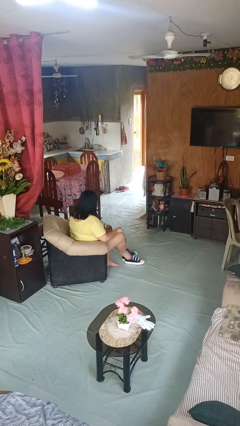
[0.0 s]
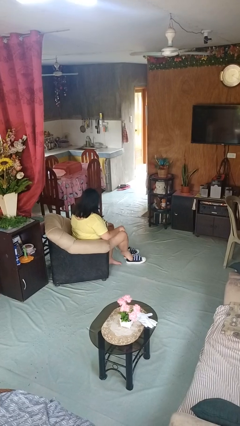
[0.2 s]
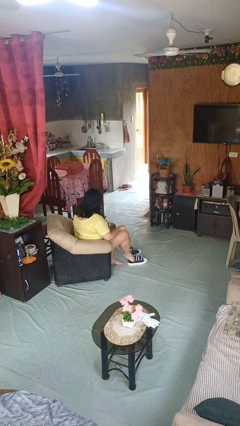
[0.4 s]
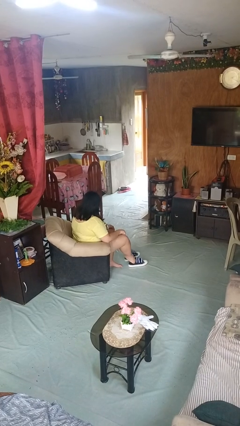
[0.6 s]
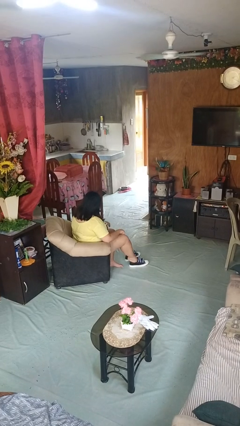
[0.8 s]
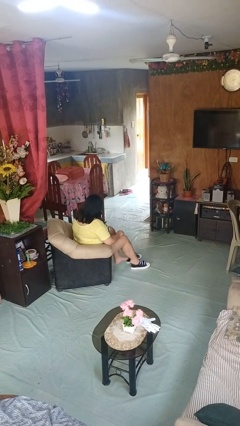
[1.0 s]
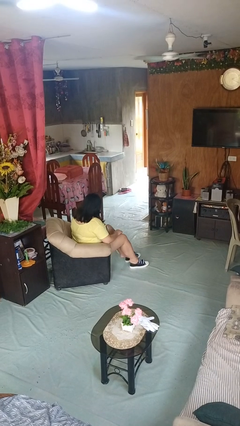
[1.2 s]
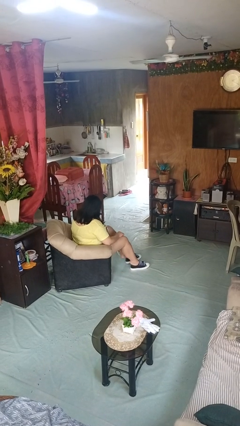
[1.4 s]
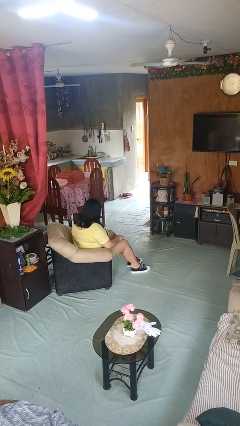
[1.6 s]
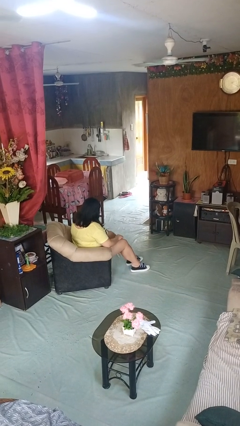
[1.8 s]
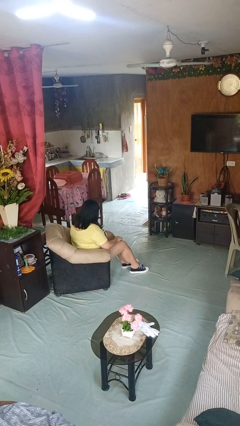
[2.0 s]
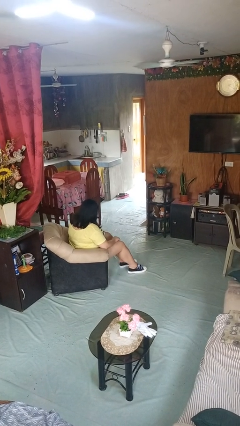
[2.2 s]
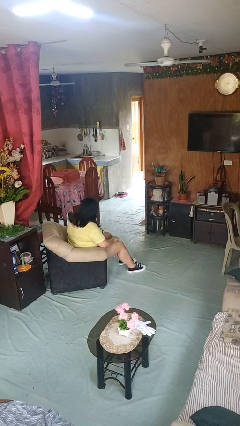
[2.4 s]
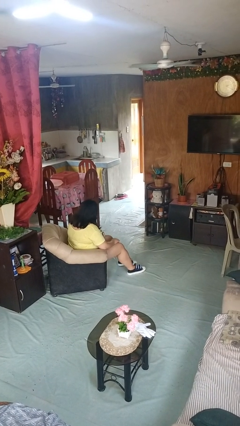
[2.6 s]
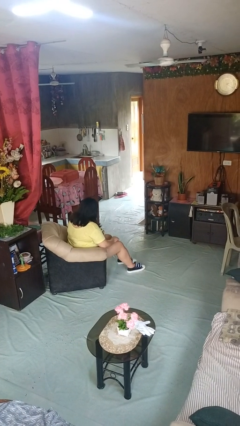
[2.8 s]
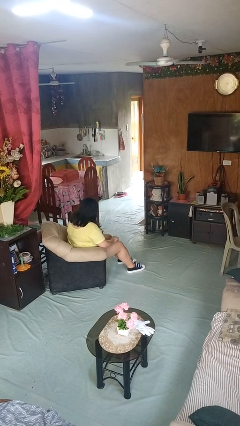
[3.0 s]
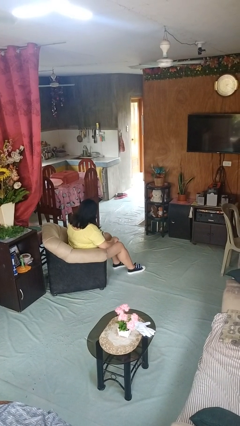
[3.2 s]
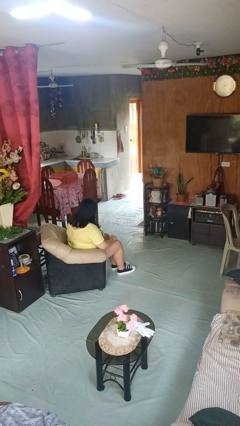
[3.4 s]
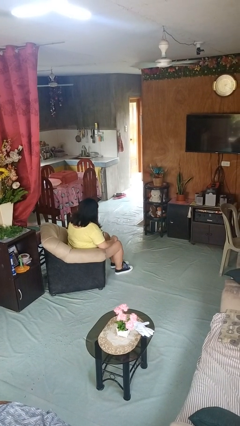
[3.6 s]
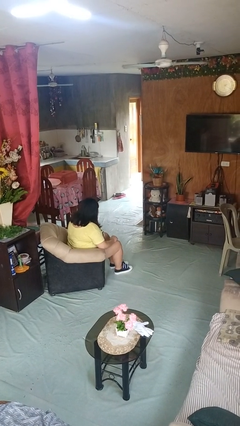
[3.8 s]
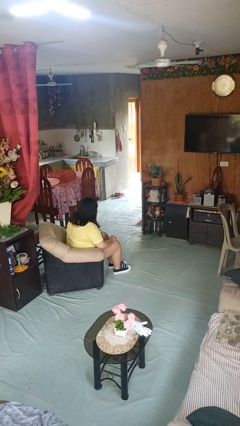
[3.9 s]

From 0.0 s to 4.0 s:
person puts on shoes

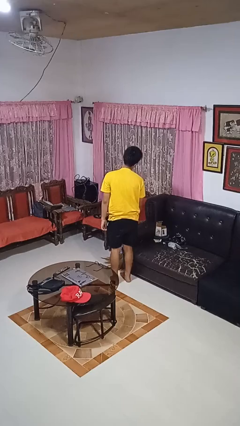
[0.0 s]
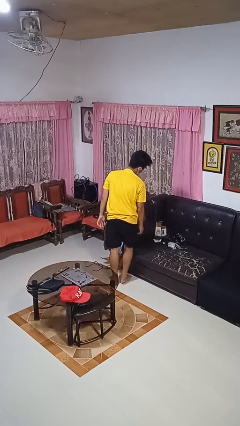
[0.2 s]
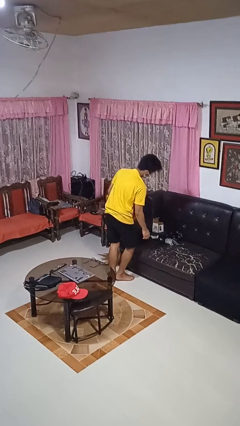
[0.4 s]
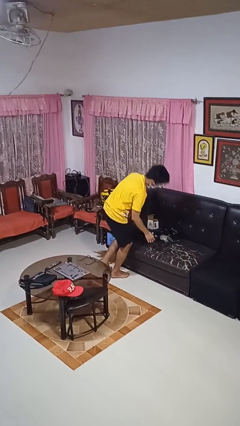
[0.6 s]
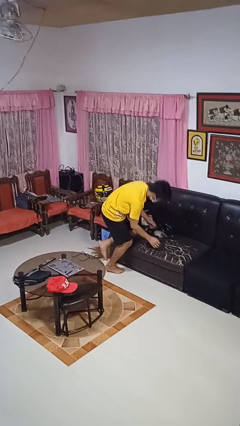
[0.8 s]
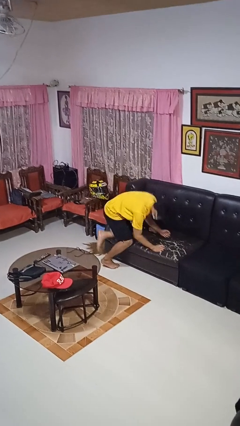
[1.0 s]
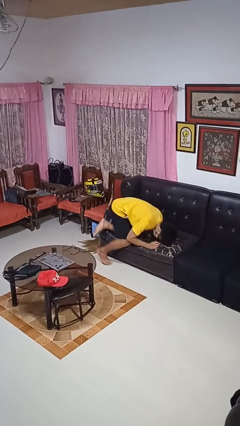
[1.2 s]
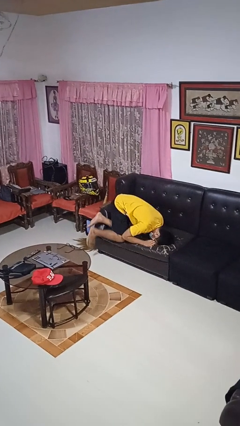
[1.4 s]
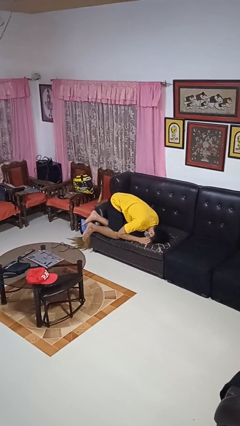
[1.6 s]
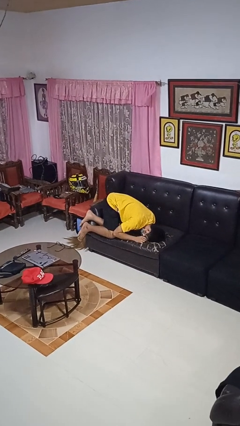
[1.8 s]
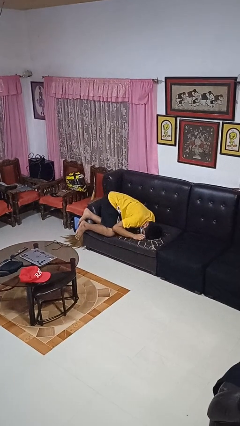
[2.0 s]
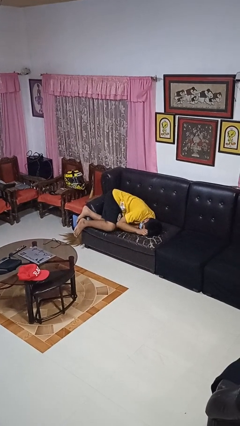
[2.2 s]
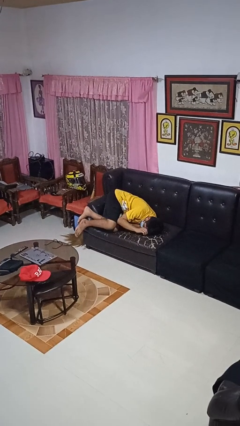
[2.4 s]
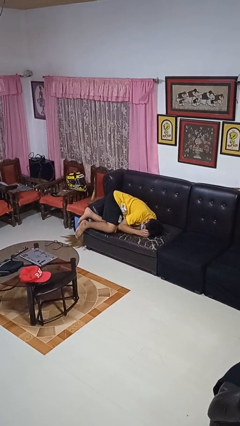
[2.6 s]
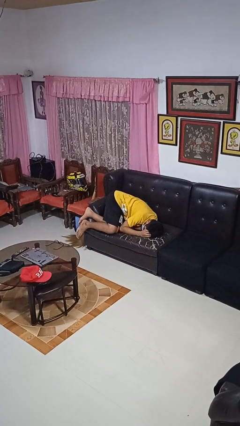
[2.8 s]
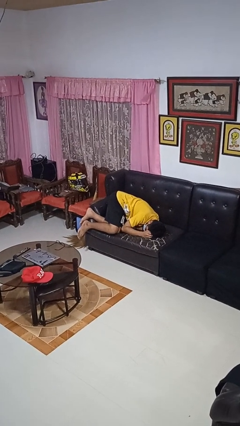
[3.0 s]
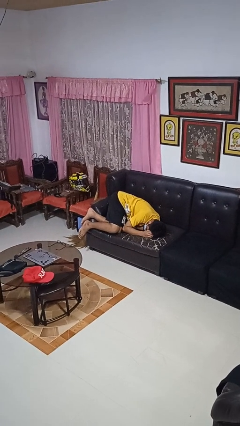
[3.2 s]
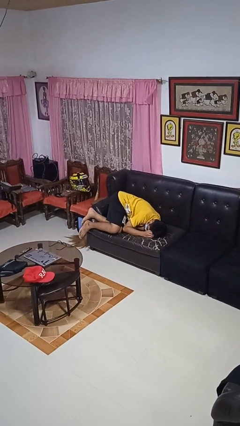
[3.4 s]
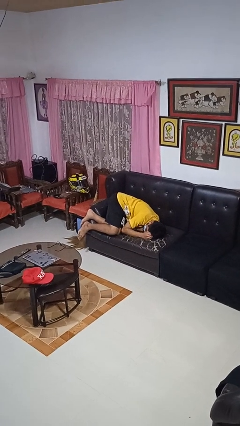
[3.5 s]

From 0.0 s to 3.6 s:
person lies down on couch

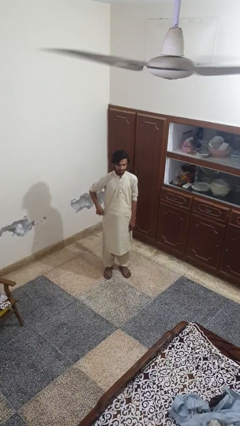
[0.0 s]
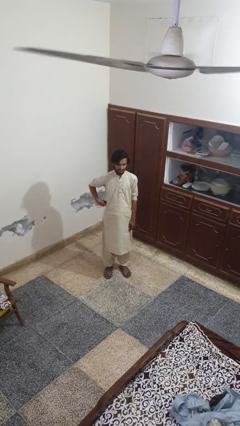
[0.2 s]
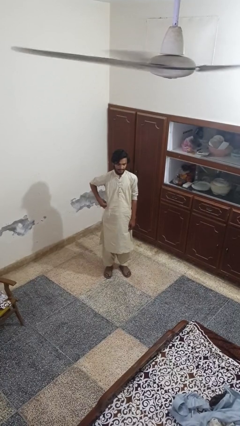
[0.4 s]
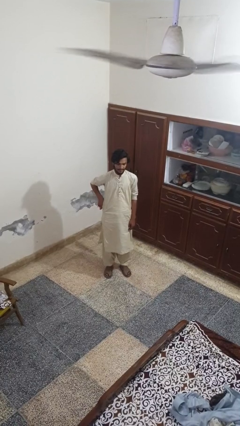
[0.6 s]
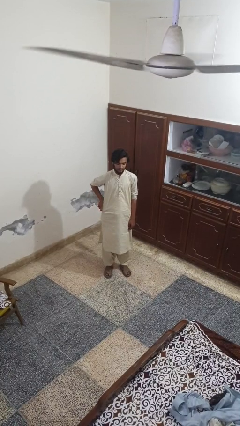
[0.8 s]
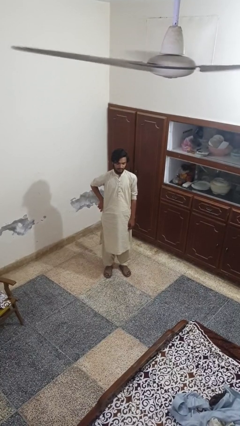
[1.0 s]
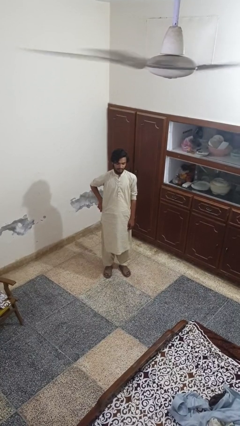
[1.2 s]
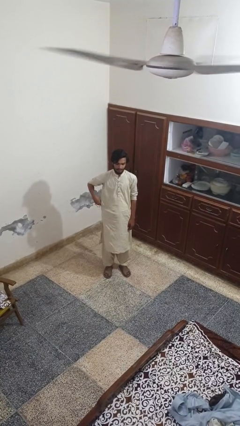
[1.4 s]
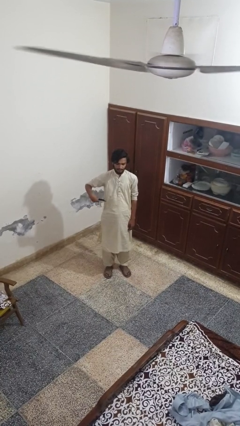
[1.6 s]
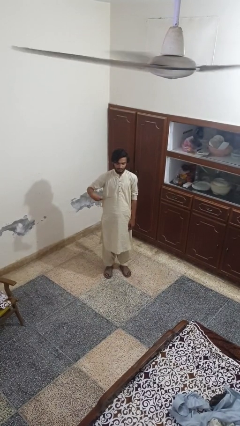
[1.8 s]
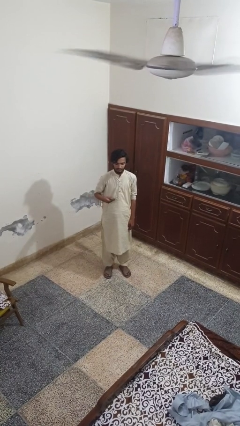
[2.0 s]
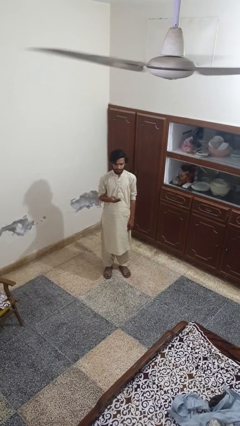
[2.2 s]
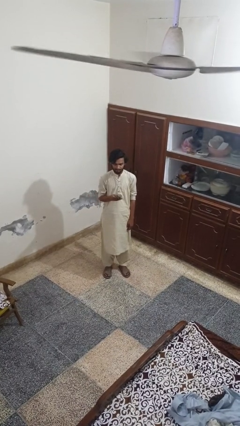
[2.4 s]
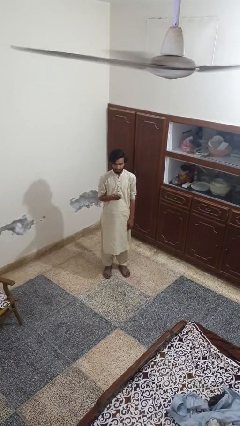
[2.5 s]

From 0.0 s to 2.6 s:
person takes phone from pocket

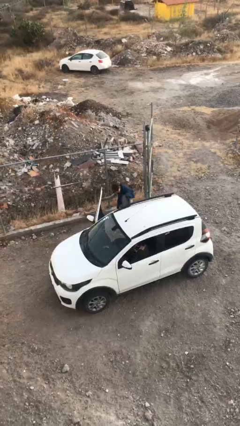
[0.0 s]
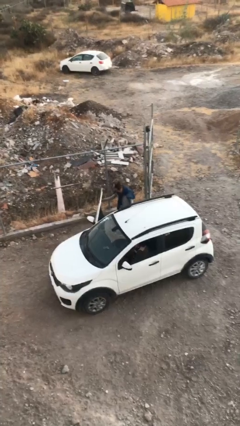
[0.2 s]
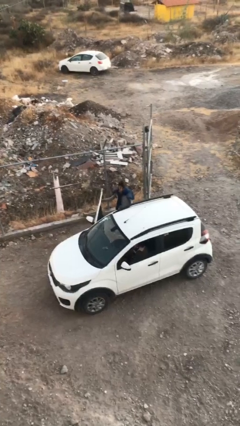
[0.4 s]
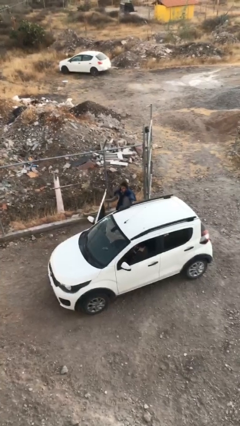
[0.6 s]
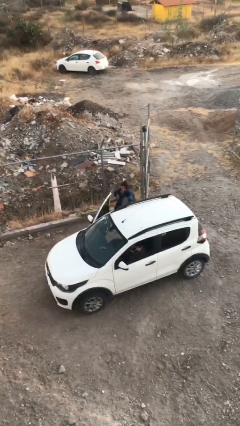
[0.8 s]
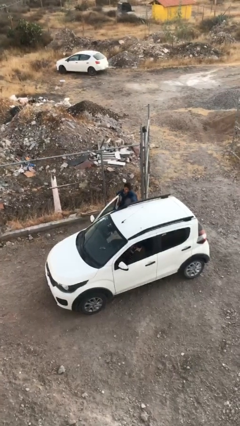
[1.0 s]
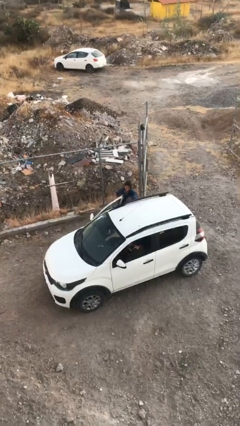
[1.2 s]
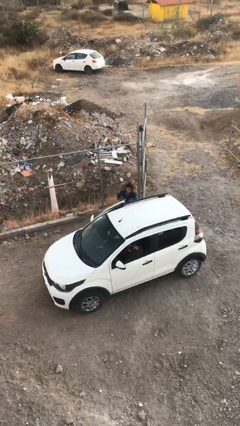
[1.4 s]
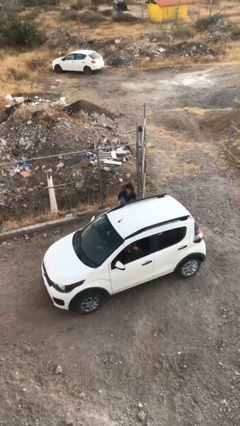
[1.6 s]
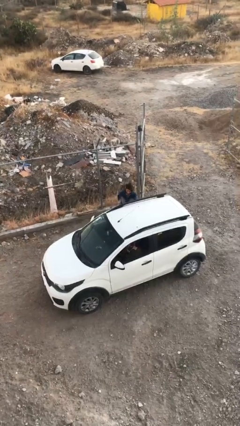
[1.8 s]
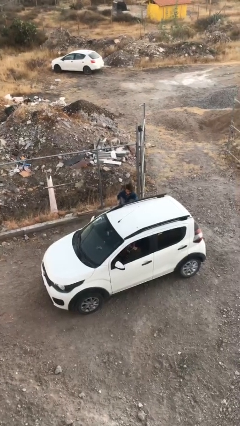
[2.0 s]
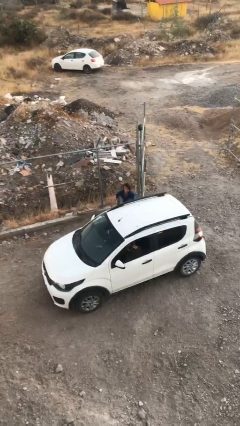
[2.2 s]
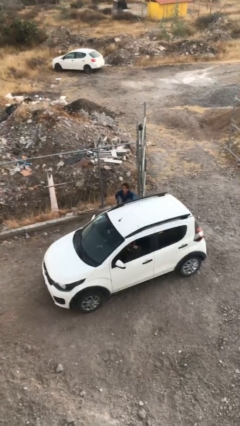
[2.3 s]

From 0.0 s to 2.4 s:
person closes car door

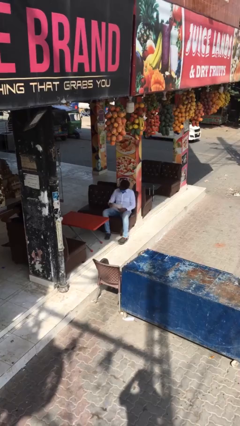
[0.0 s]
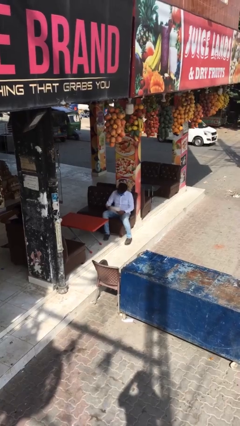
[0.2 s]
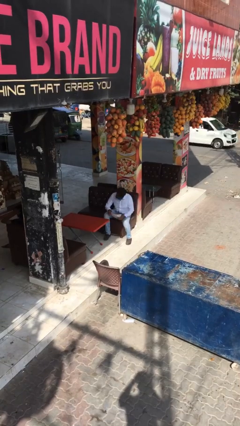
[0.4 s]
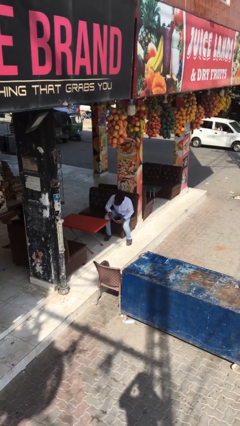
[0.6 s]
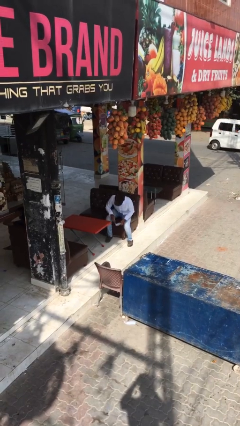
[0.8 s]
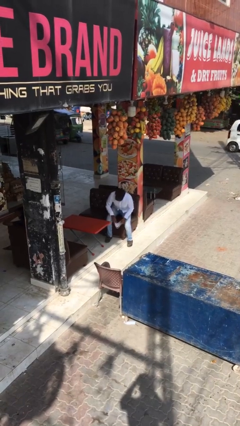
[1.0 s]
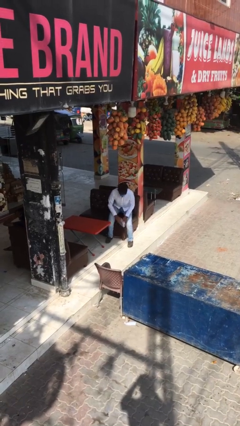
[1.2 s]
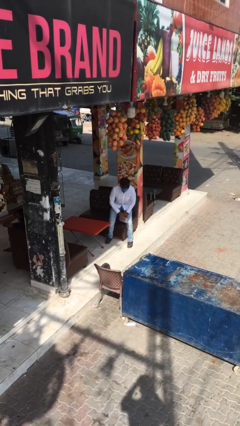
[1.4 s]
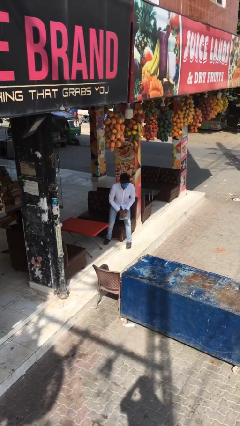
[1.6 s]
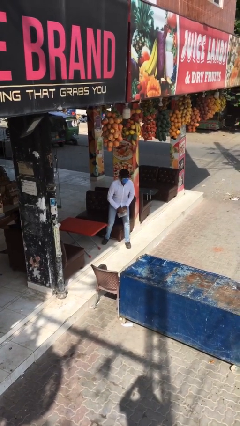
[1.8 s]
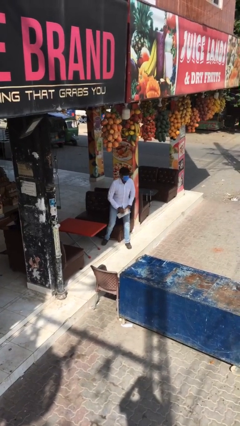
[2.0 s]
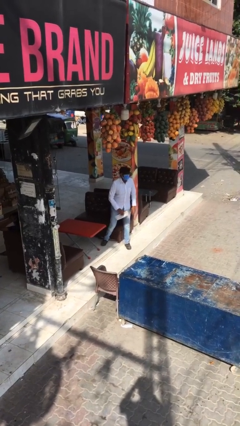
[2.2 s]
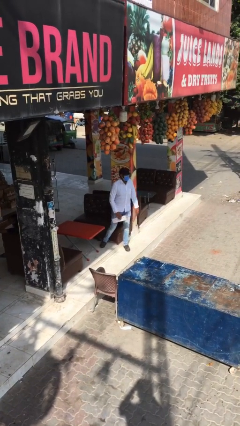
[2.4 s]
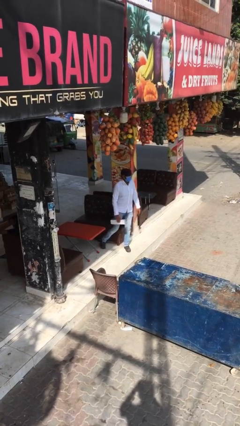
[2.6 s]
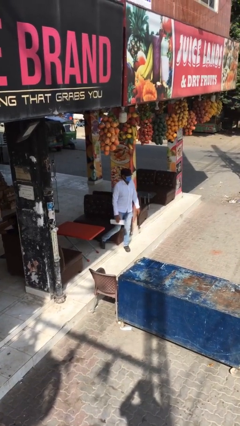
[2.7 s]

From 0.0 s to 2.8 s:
person stands up

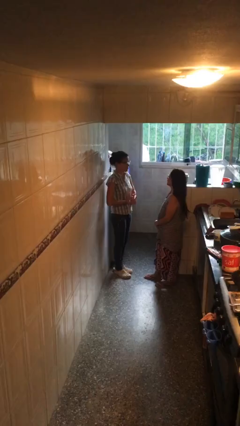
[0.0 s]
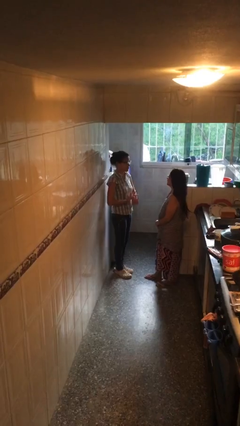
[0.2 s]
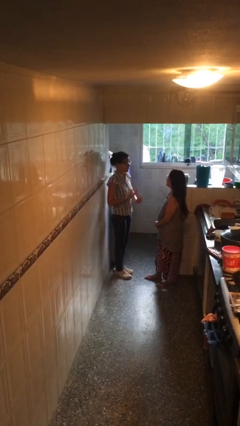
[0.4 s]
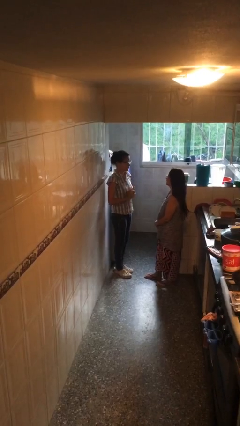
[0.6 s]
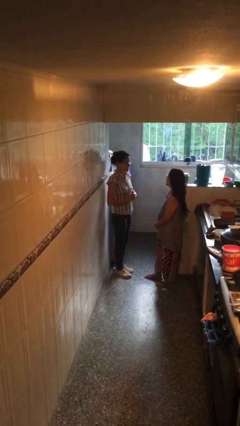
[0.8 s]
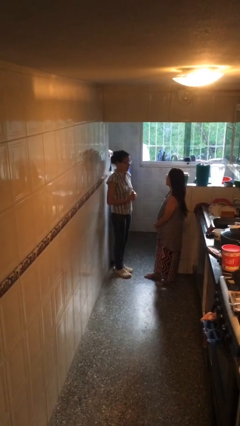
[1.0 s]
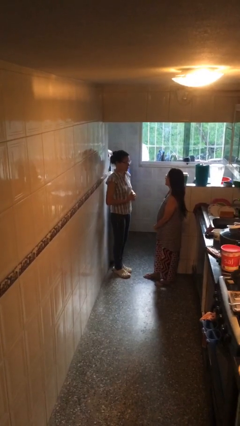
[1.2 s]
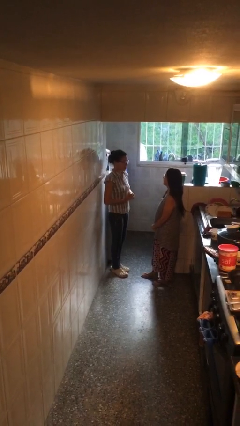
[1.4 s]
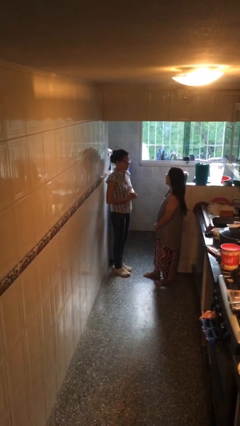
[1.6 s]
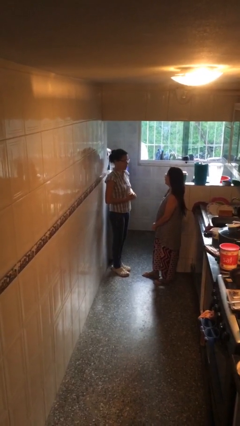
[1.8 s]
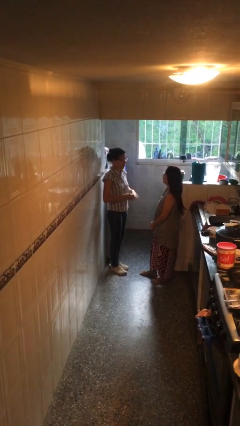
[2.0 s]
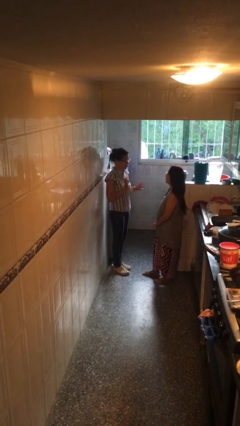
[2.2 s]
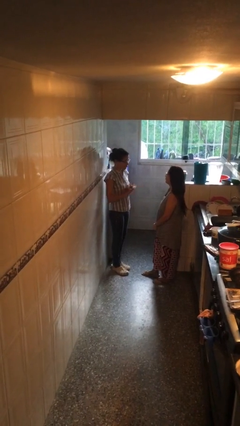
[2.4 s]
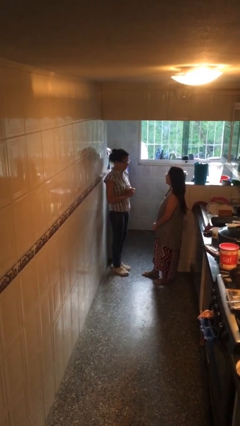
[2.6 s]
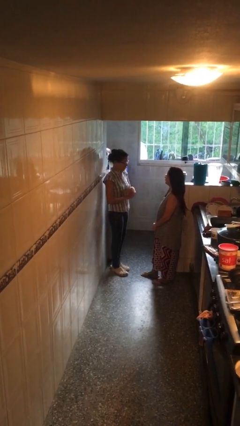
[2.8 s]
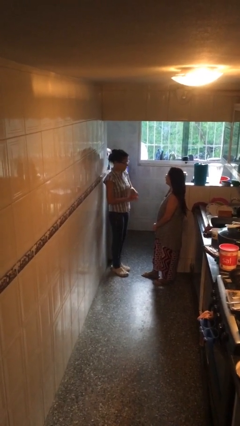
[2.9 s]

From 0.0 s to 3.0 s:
person talks to person
